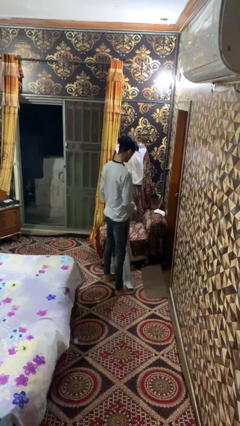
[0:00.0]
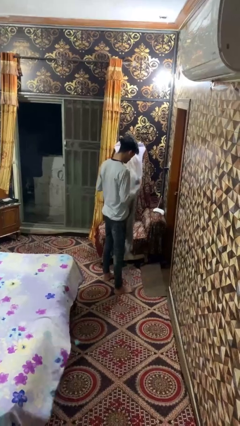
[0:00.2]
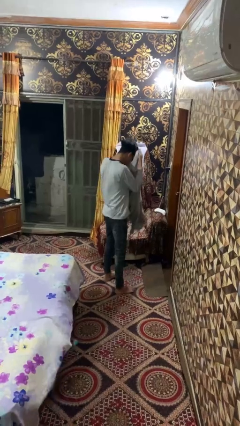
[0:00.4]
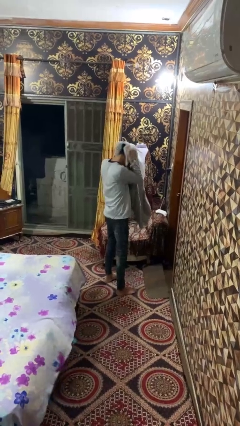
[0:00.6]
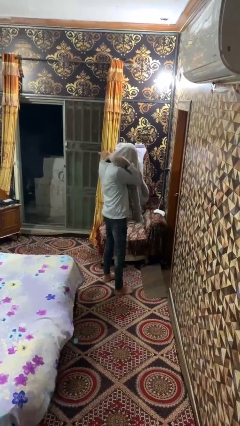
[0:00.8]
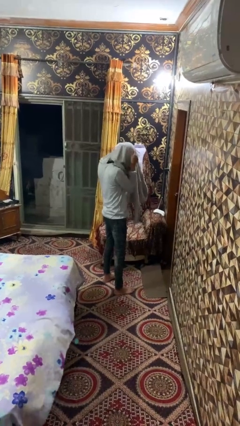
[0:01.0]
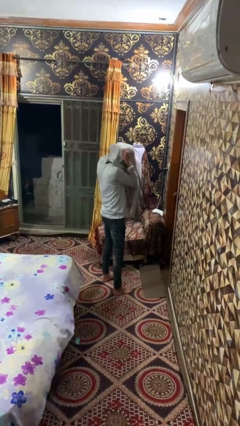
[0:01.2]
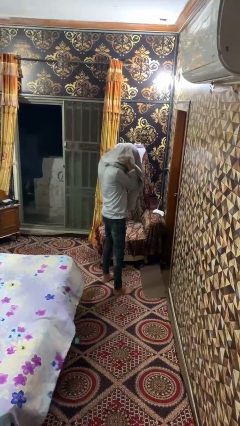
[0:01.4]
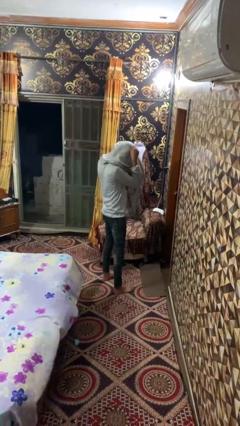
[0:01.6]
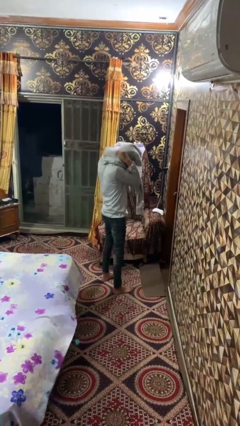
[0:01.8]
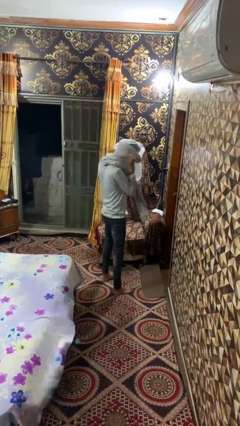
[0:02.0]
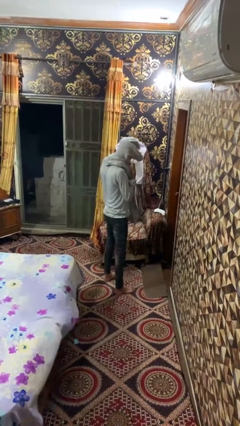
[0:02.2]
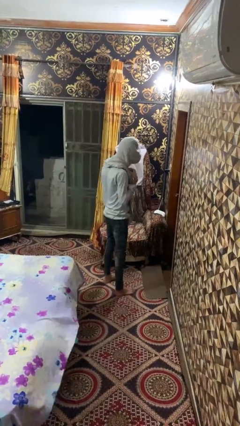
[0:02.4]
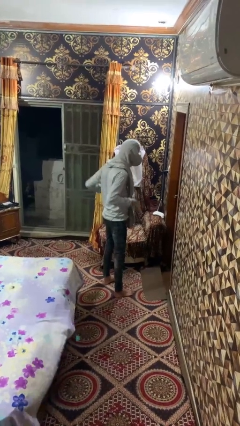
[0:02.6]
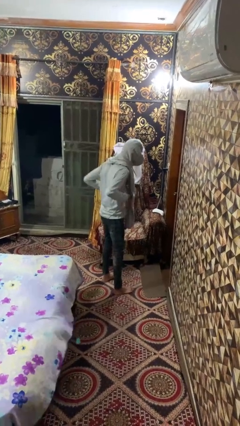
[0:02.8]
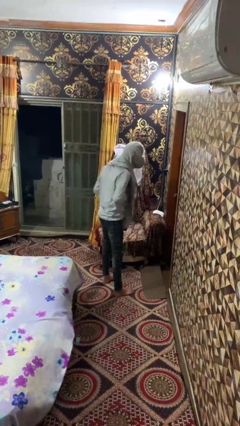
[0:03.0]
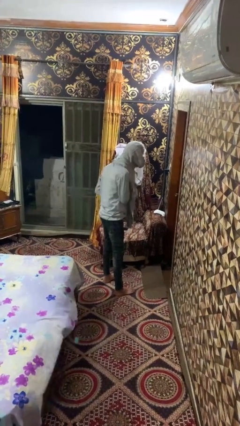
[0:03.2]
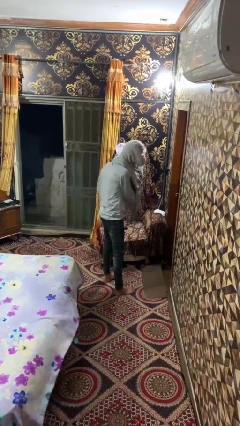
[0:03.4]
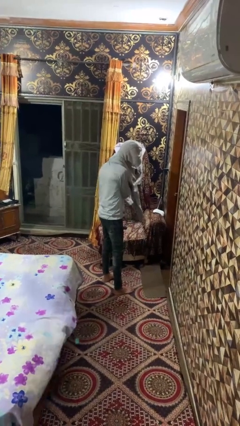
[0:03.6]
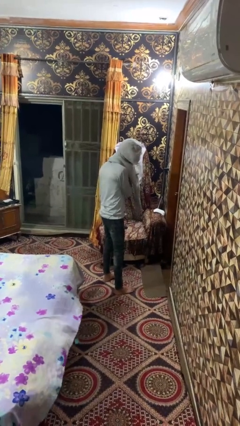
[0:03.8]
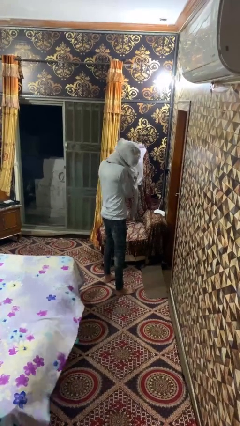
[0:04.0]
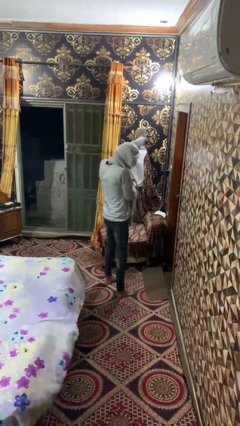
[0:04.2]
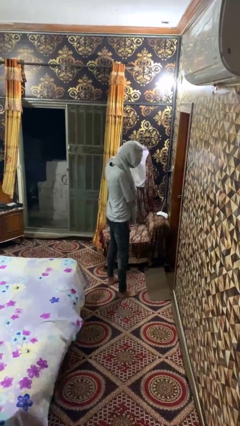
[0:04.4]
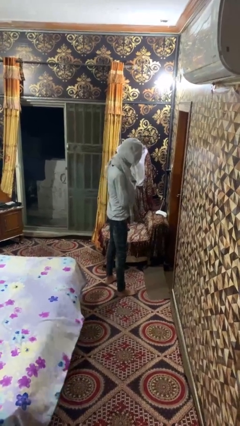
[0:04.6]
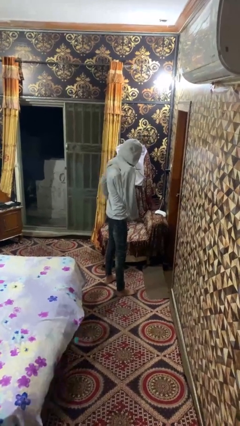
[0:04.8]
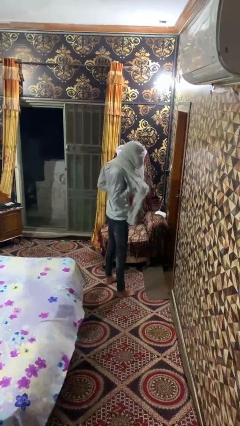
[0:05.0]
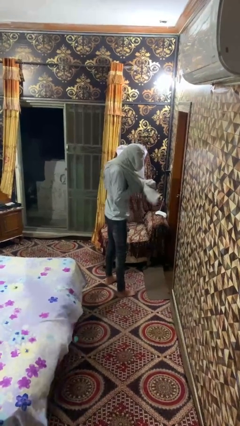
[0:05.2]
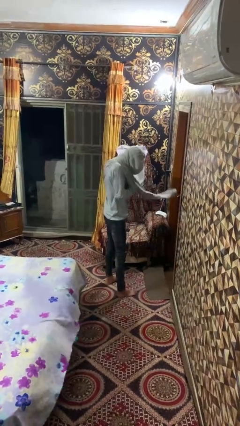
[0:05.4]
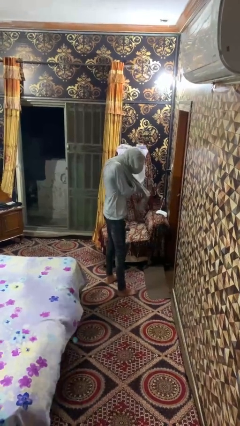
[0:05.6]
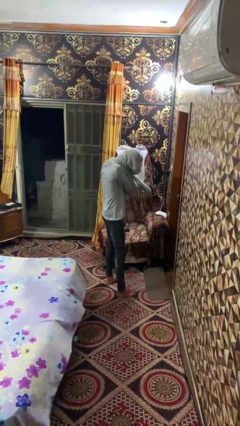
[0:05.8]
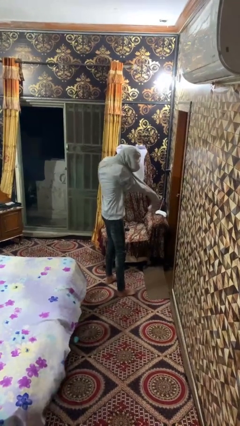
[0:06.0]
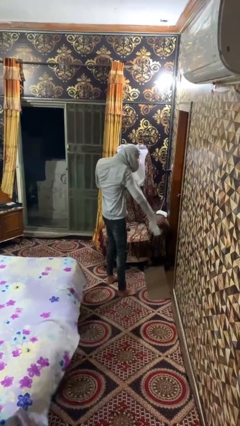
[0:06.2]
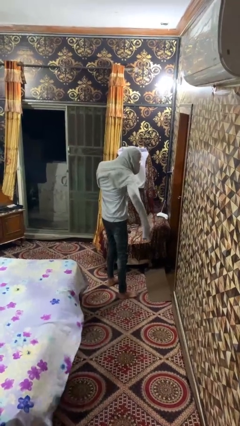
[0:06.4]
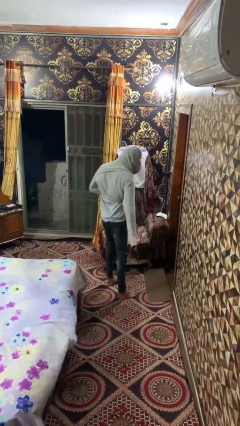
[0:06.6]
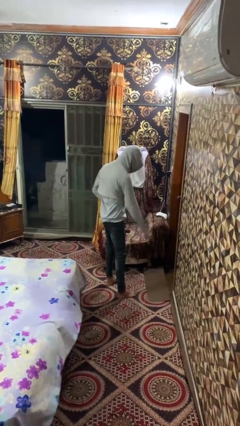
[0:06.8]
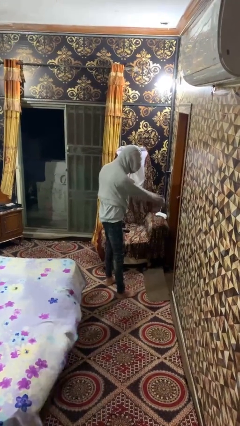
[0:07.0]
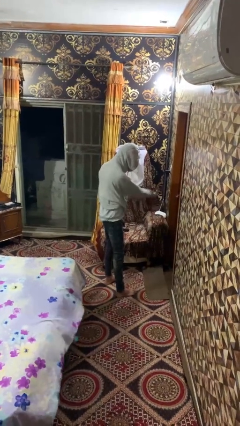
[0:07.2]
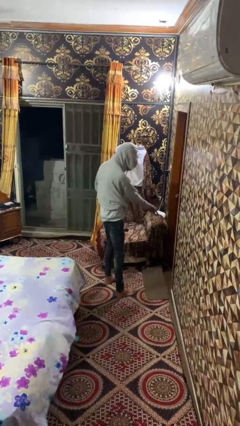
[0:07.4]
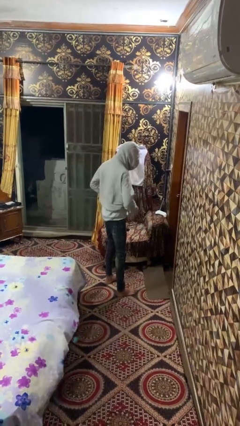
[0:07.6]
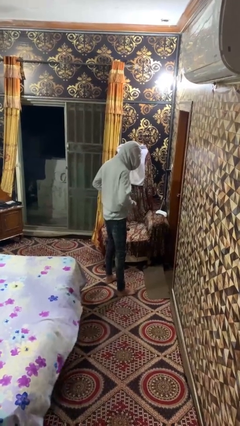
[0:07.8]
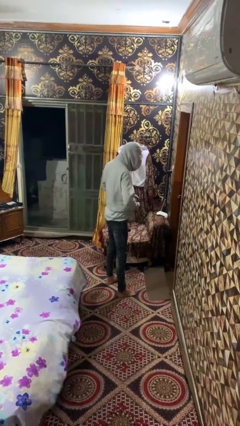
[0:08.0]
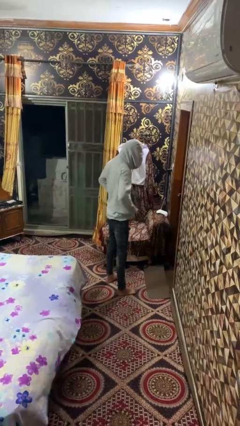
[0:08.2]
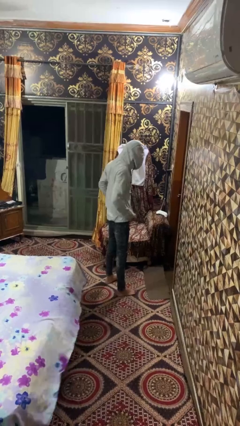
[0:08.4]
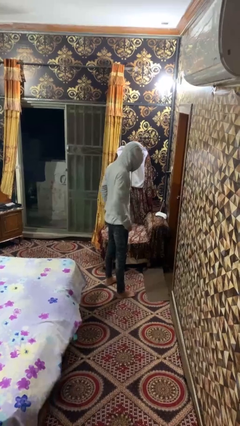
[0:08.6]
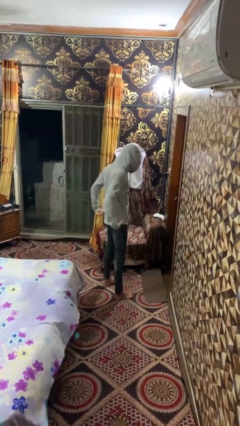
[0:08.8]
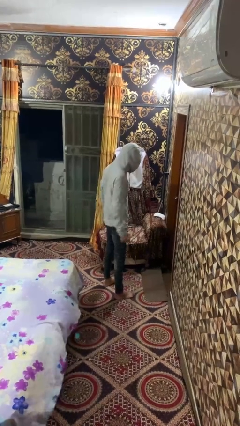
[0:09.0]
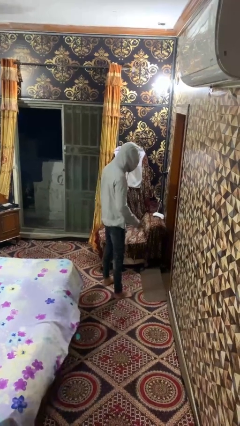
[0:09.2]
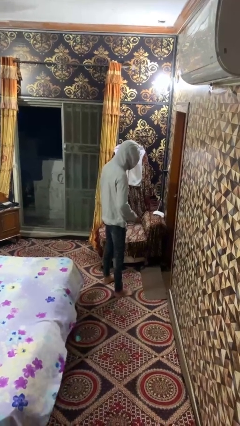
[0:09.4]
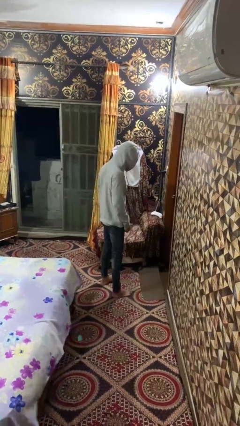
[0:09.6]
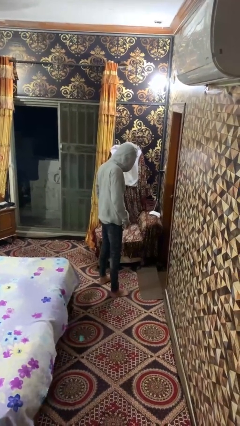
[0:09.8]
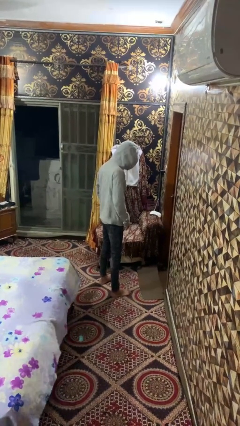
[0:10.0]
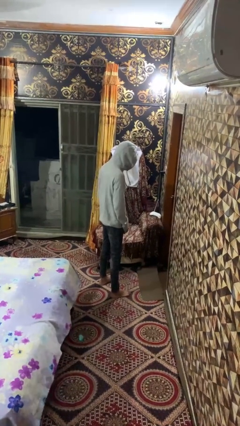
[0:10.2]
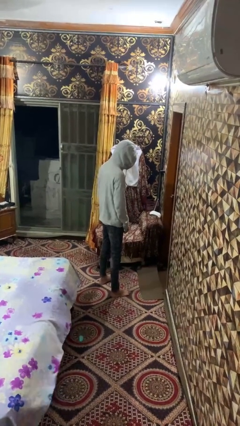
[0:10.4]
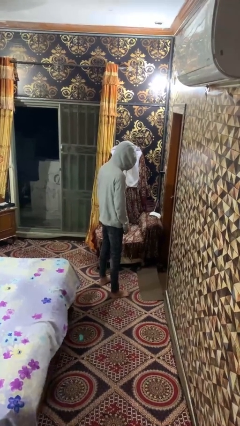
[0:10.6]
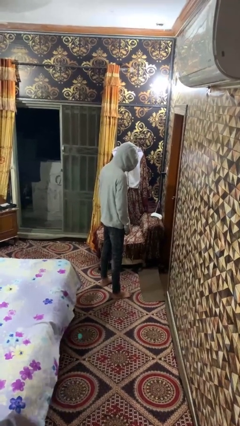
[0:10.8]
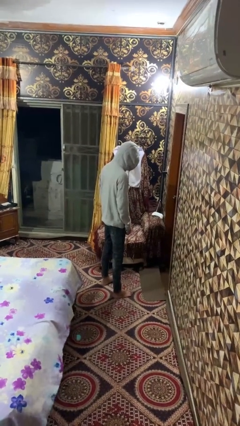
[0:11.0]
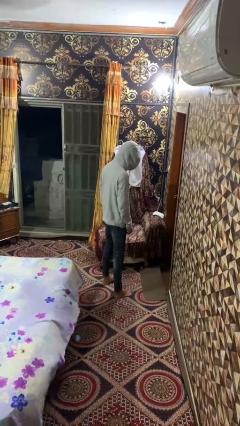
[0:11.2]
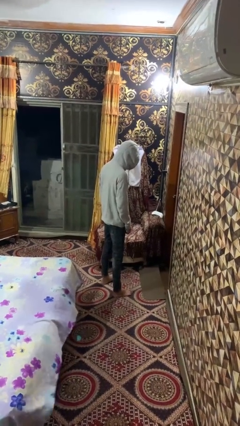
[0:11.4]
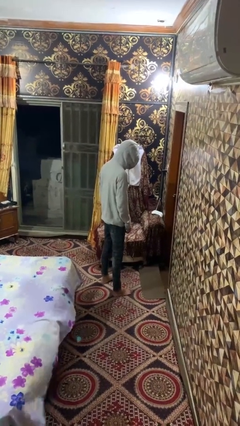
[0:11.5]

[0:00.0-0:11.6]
person puts on hoodie

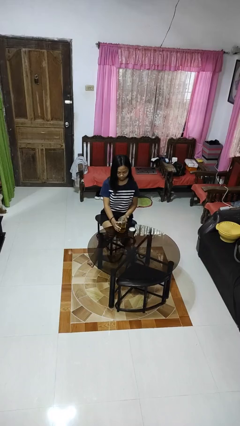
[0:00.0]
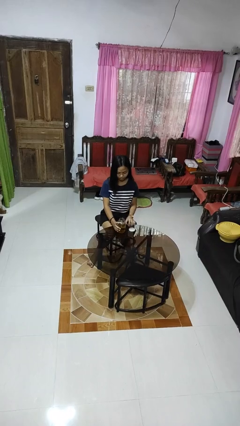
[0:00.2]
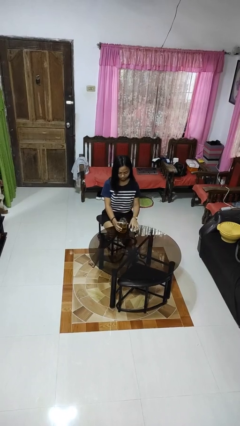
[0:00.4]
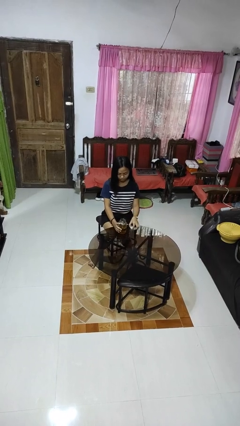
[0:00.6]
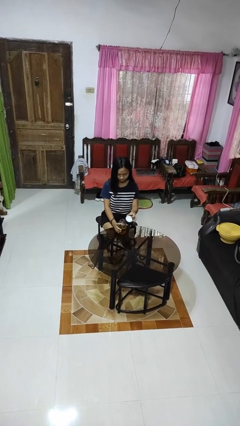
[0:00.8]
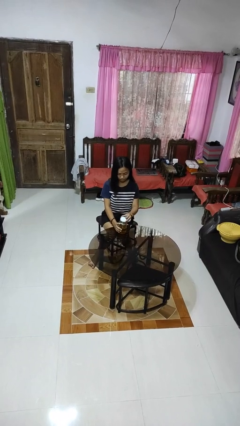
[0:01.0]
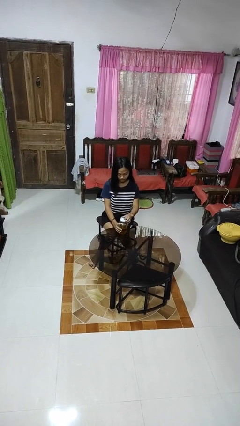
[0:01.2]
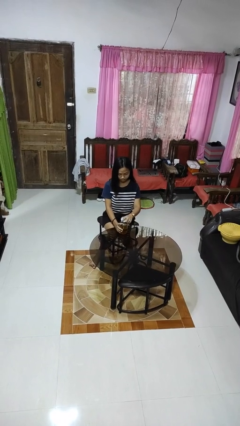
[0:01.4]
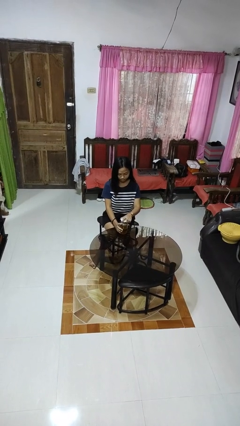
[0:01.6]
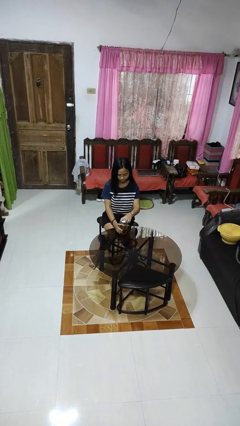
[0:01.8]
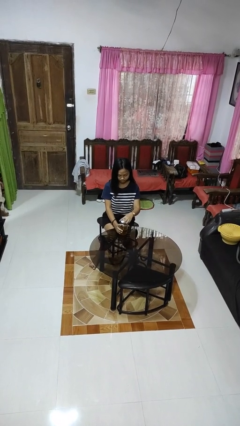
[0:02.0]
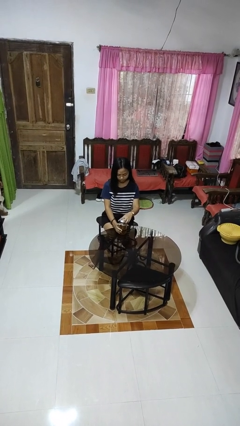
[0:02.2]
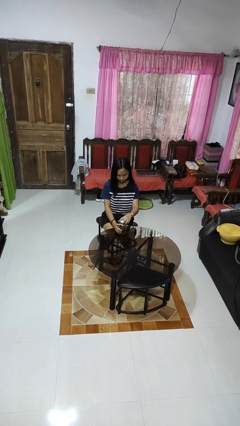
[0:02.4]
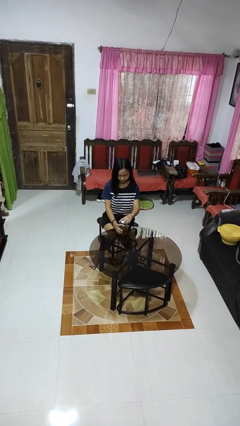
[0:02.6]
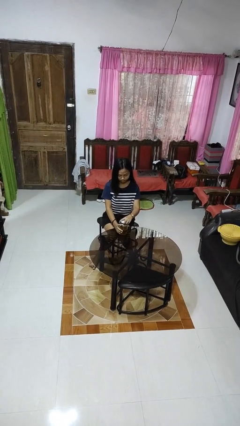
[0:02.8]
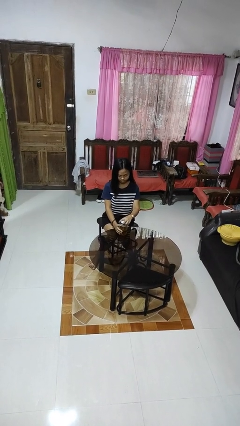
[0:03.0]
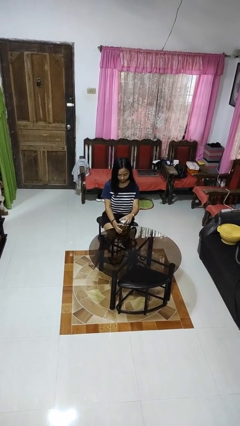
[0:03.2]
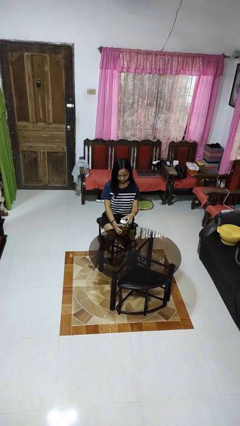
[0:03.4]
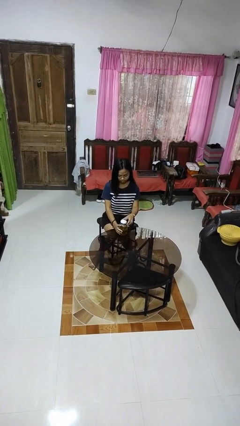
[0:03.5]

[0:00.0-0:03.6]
person closes jar

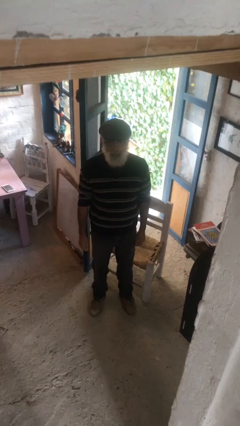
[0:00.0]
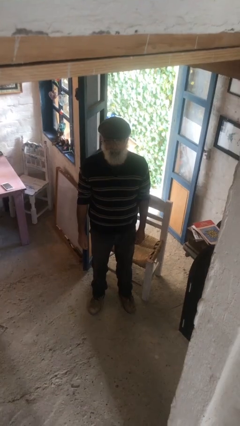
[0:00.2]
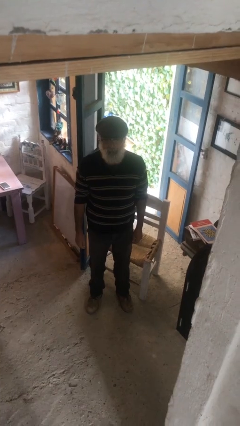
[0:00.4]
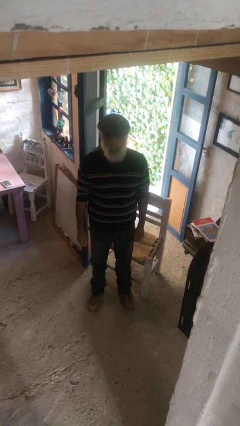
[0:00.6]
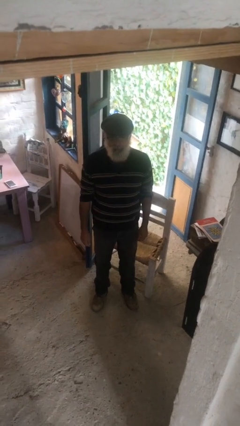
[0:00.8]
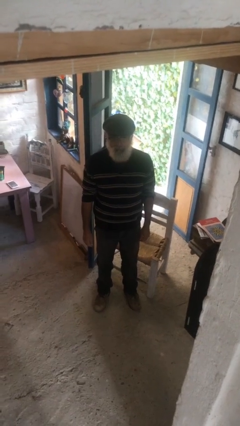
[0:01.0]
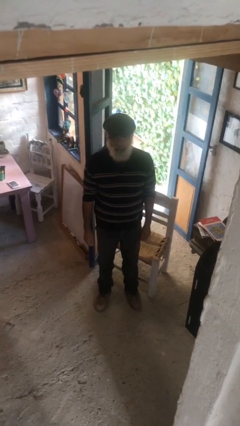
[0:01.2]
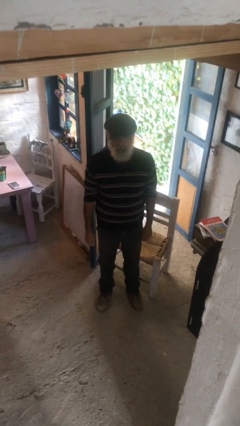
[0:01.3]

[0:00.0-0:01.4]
person stands up

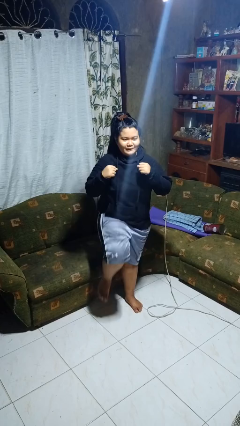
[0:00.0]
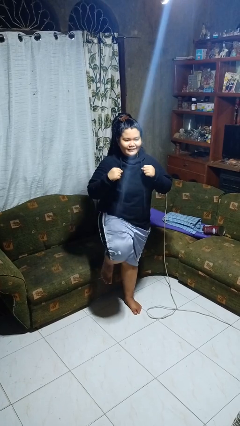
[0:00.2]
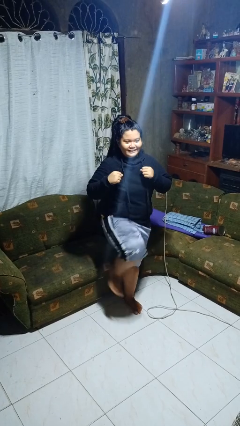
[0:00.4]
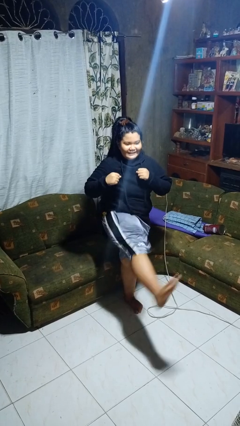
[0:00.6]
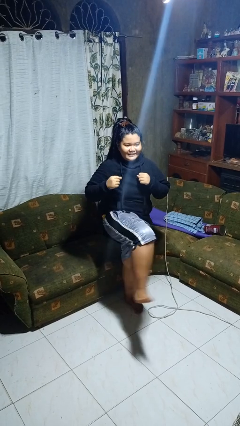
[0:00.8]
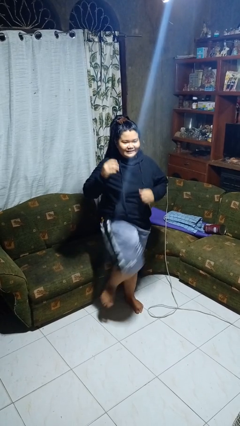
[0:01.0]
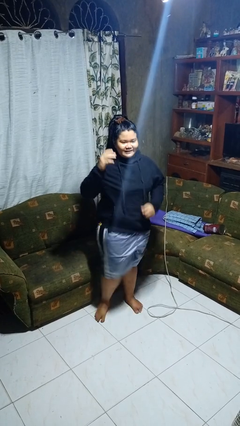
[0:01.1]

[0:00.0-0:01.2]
person karate kicks
